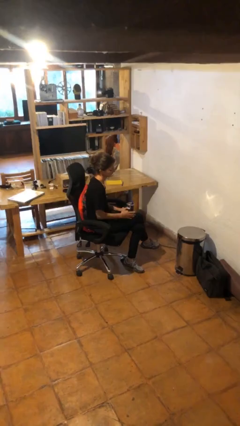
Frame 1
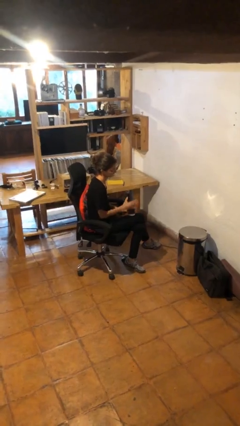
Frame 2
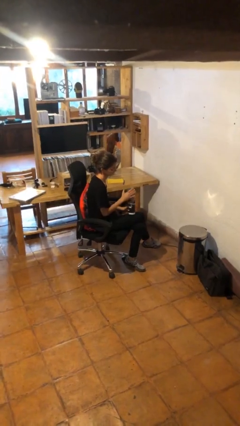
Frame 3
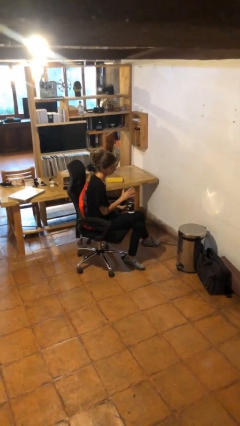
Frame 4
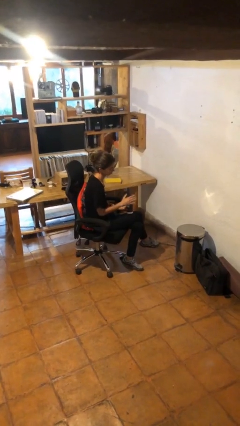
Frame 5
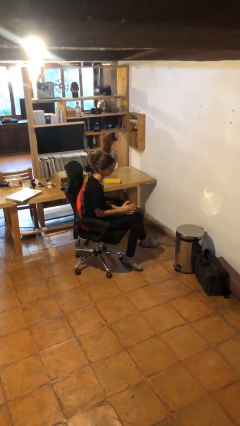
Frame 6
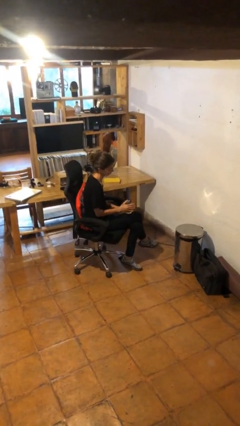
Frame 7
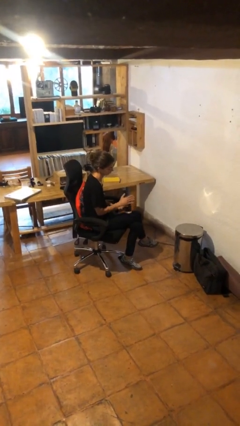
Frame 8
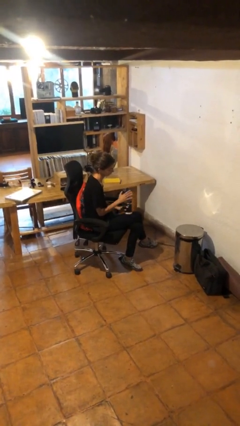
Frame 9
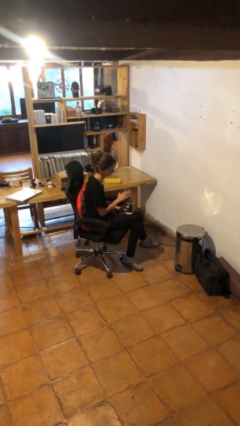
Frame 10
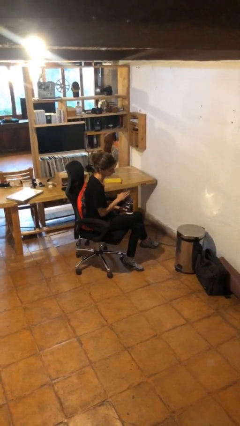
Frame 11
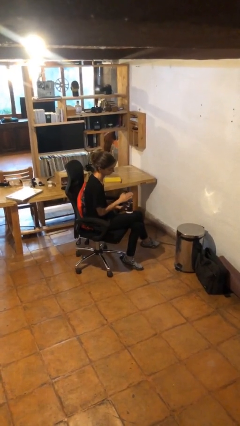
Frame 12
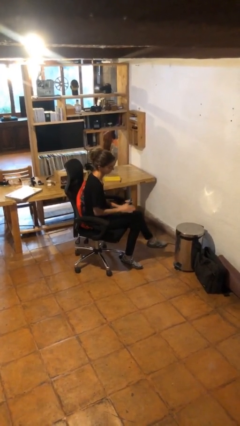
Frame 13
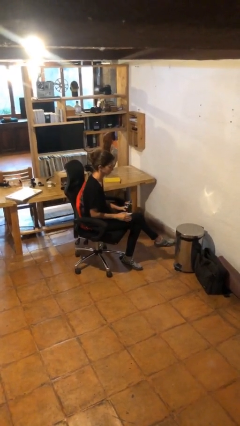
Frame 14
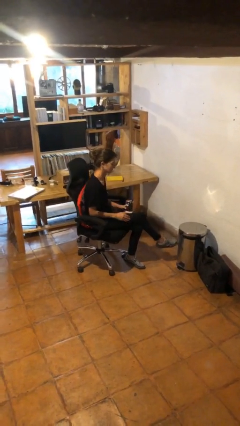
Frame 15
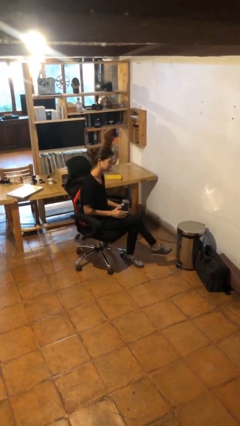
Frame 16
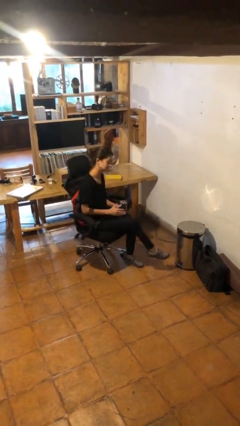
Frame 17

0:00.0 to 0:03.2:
person waves hand over object

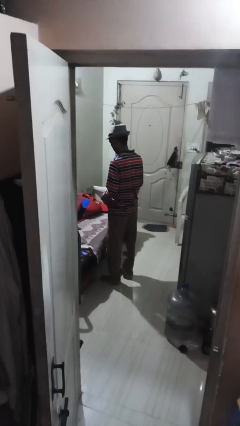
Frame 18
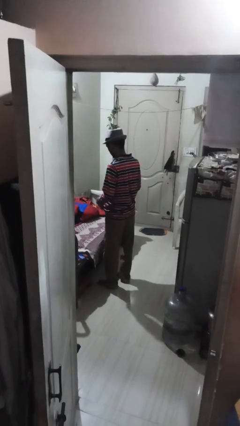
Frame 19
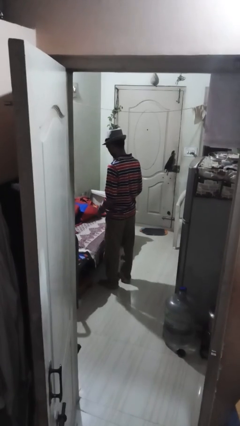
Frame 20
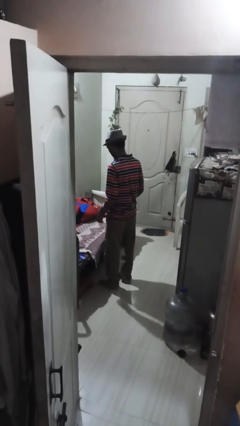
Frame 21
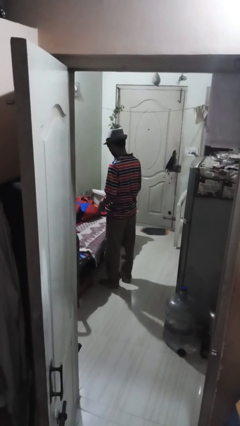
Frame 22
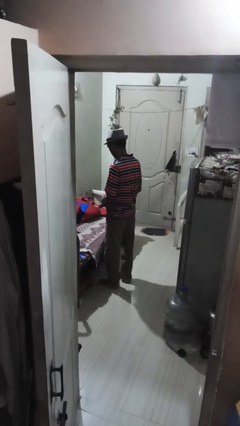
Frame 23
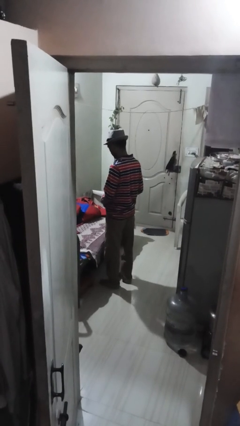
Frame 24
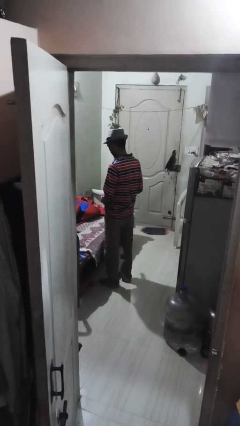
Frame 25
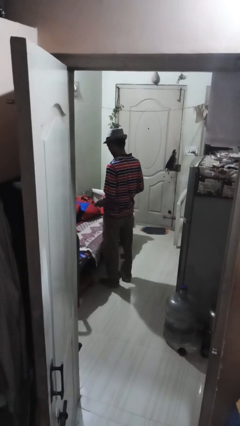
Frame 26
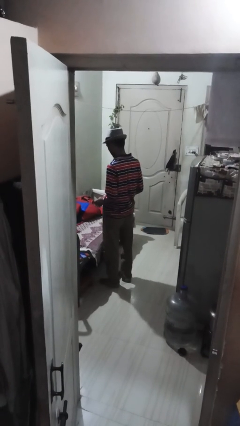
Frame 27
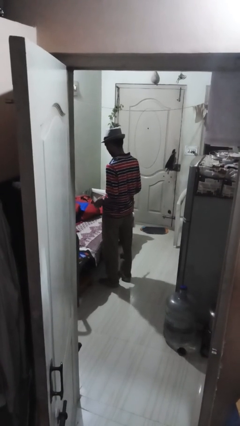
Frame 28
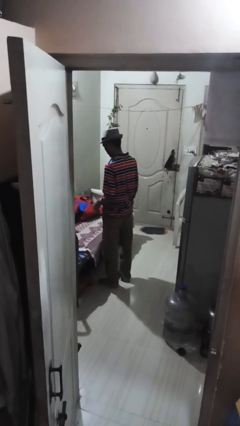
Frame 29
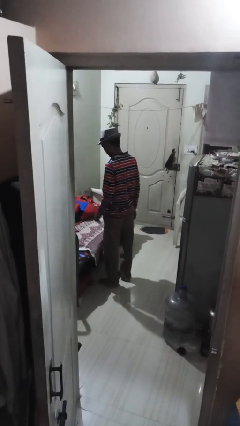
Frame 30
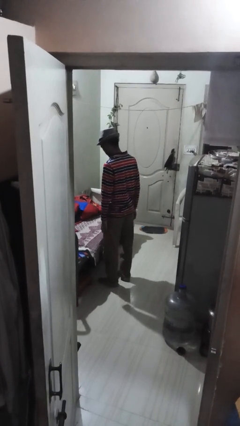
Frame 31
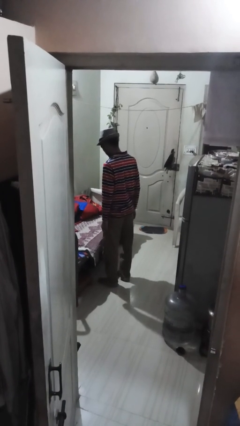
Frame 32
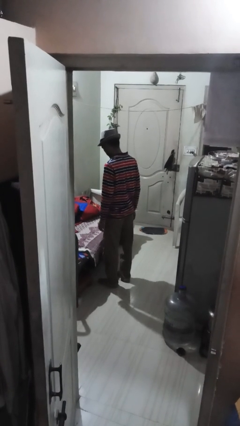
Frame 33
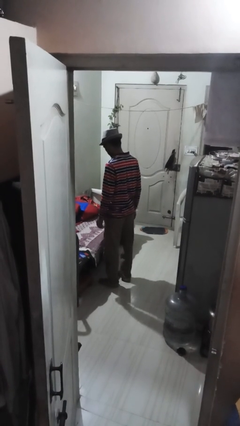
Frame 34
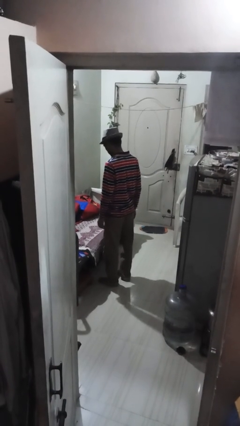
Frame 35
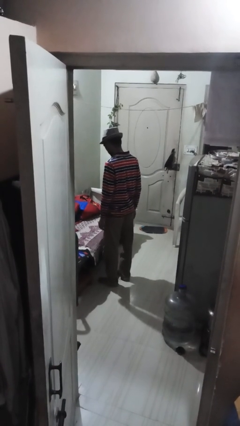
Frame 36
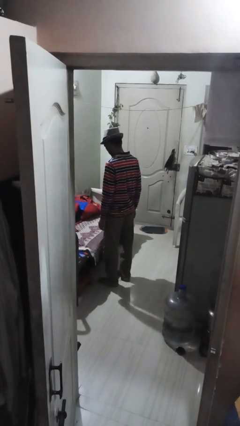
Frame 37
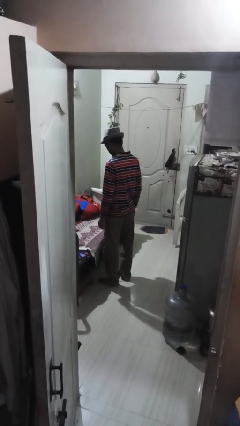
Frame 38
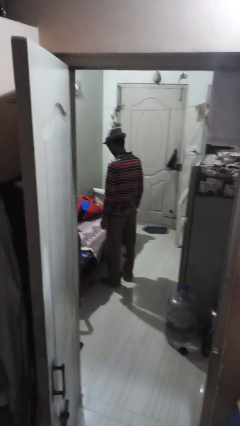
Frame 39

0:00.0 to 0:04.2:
person takes off belt

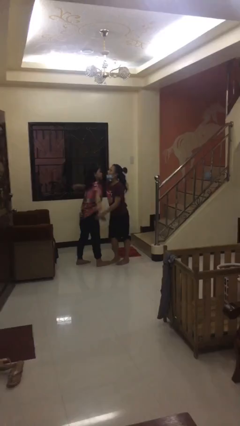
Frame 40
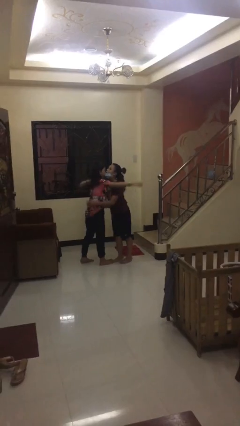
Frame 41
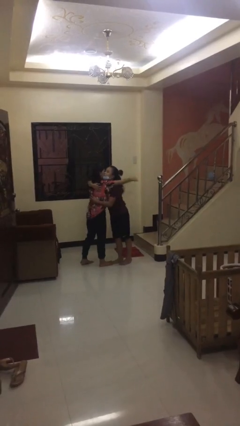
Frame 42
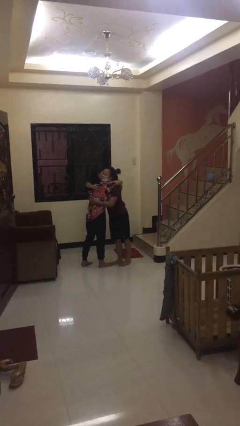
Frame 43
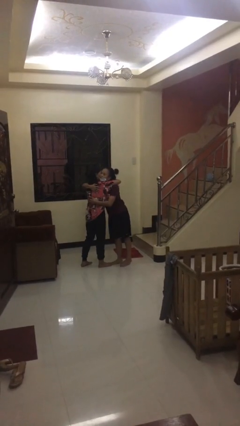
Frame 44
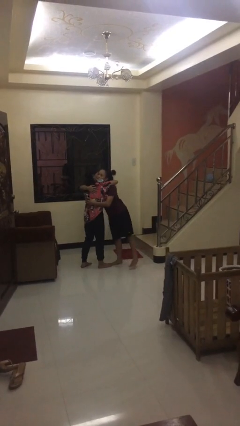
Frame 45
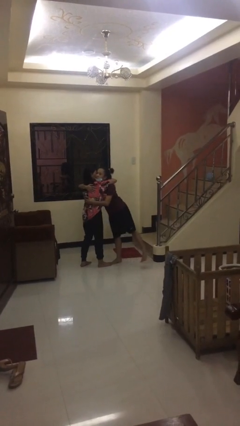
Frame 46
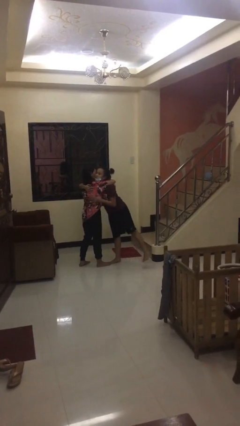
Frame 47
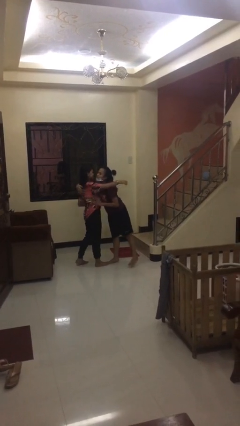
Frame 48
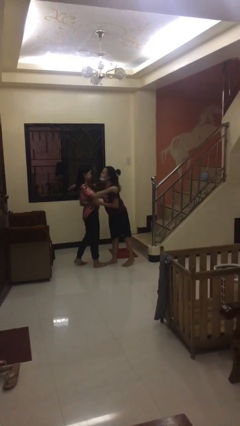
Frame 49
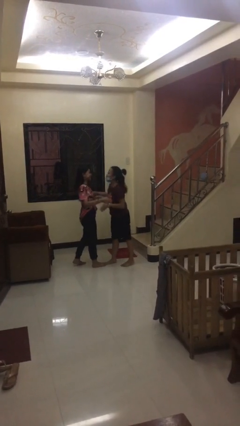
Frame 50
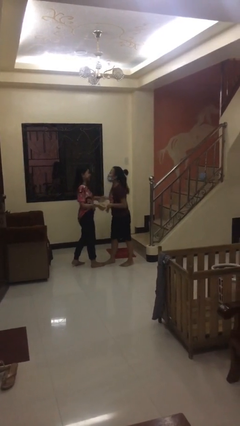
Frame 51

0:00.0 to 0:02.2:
person embraces person

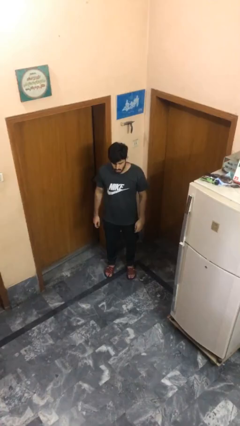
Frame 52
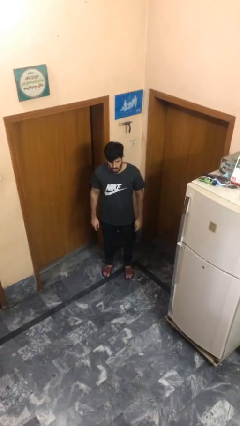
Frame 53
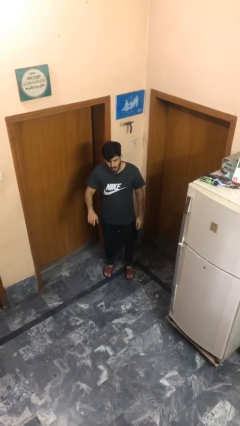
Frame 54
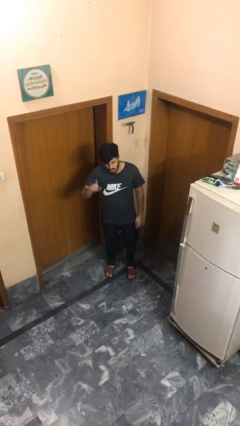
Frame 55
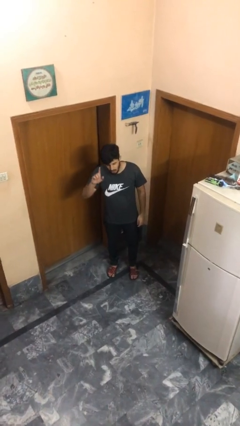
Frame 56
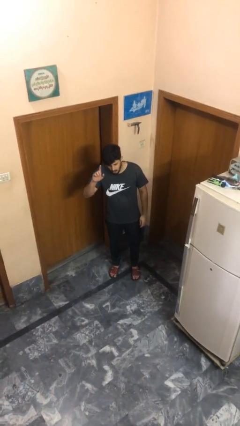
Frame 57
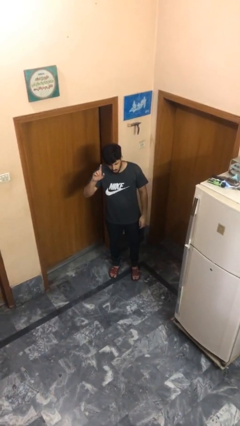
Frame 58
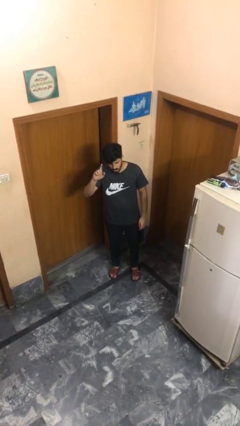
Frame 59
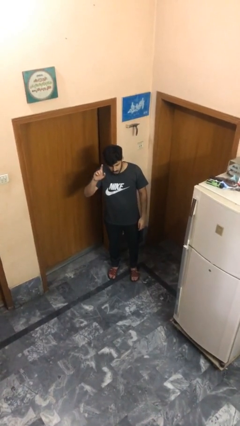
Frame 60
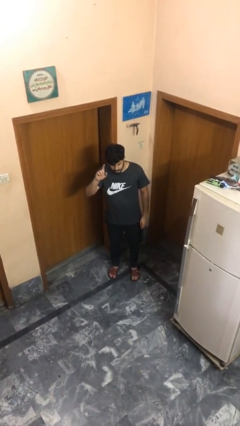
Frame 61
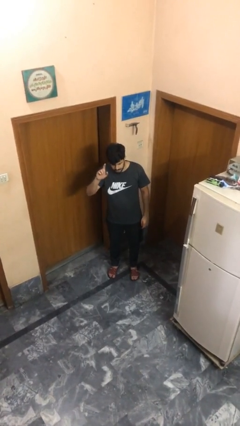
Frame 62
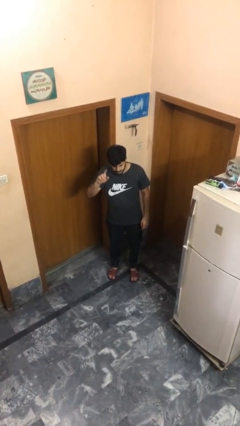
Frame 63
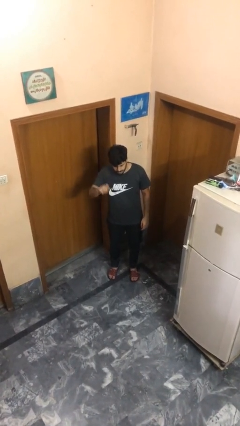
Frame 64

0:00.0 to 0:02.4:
person gestures raise hand

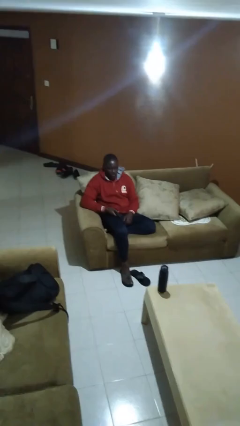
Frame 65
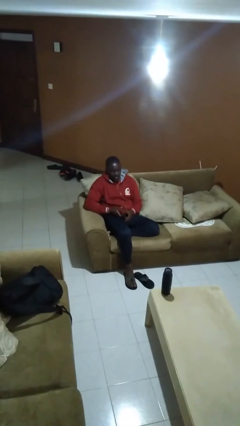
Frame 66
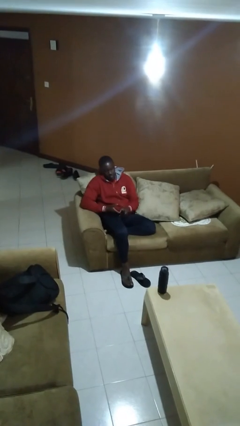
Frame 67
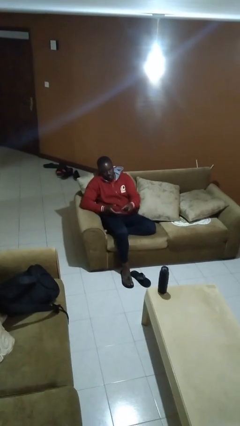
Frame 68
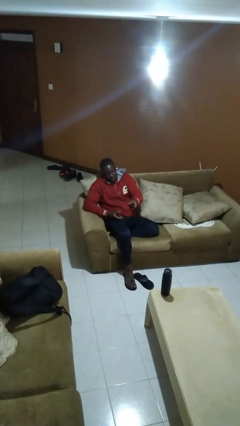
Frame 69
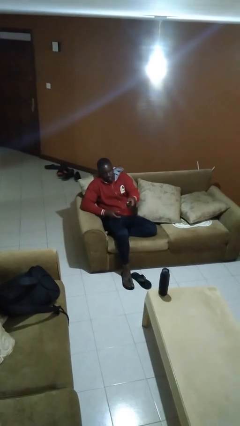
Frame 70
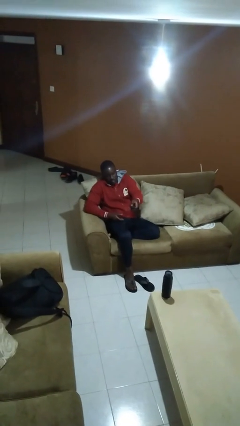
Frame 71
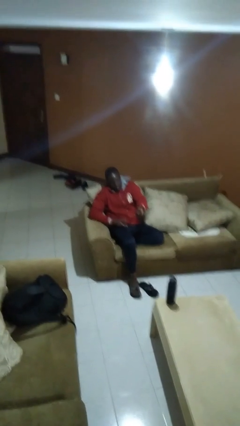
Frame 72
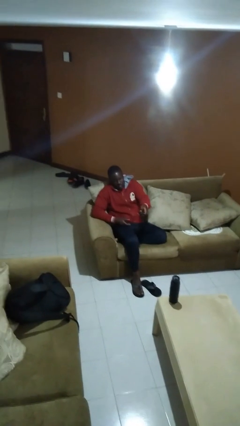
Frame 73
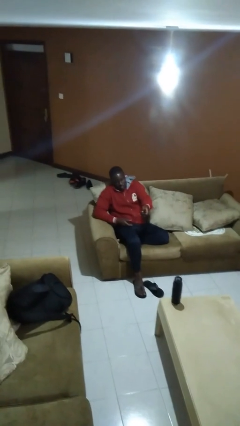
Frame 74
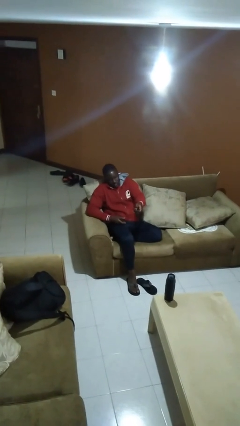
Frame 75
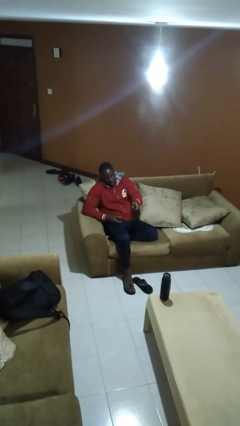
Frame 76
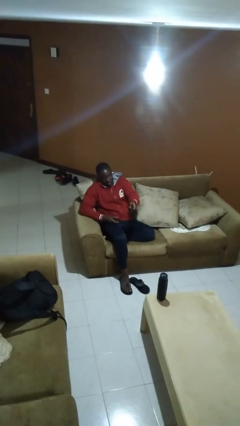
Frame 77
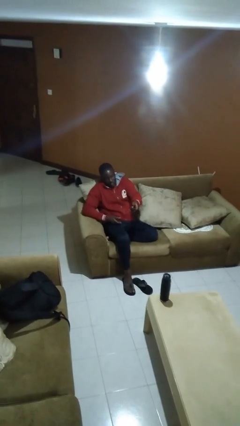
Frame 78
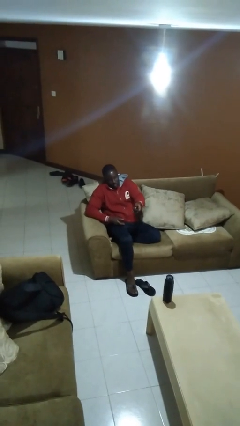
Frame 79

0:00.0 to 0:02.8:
person uses television remote

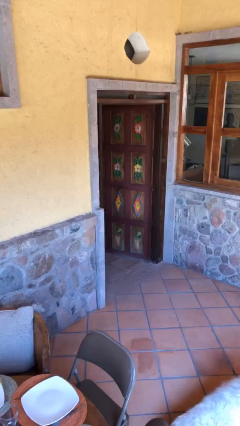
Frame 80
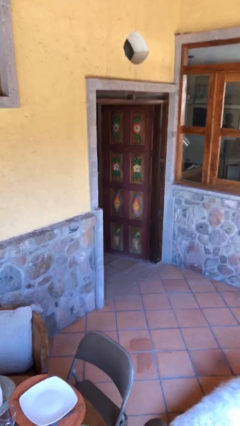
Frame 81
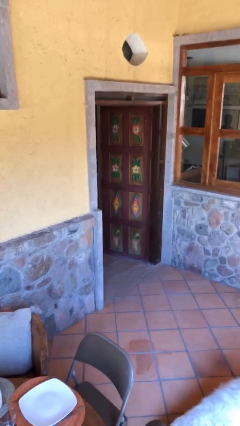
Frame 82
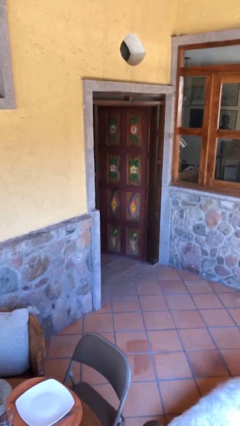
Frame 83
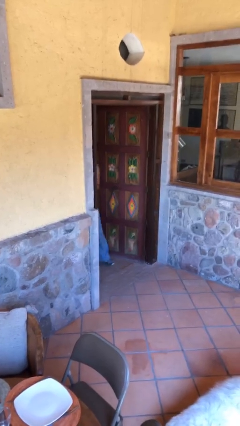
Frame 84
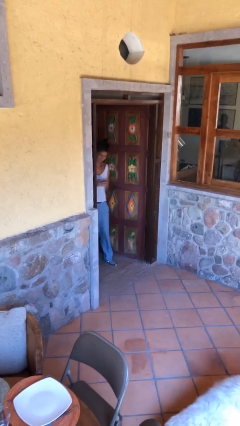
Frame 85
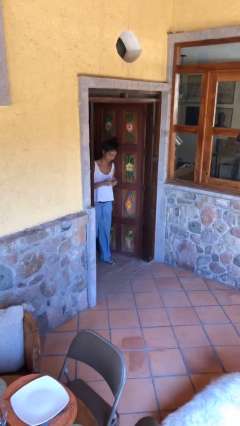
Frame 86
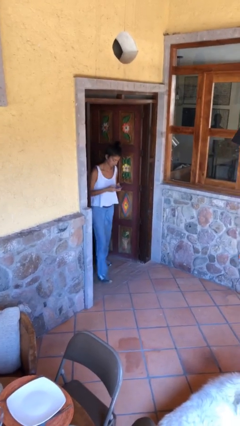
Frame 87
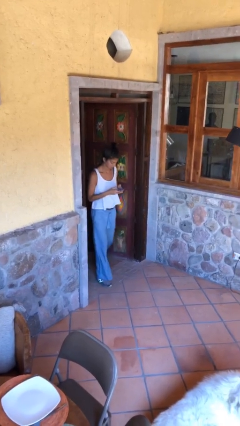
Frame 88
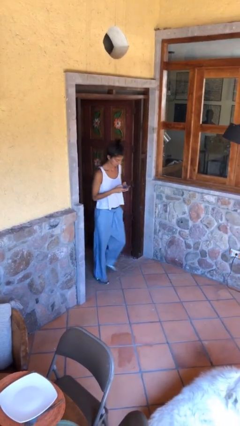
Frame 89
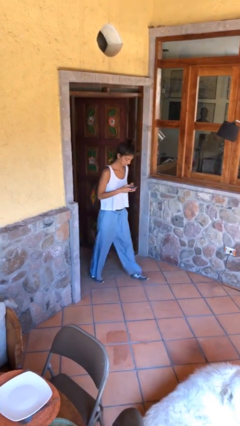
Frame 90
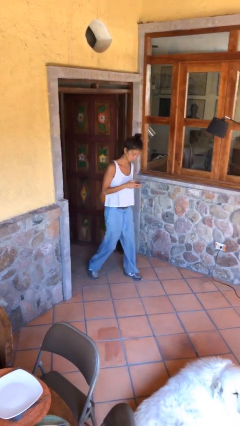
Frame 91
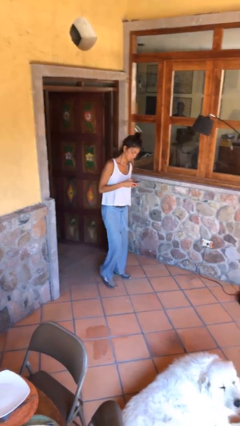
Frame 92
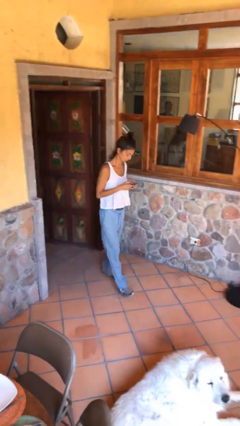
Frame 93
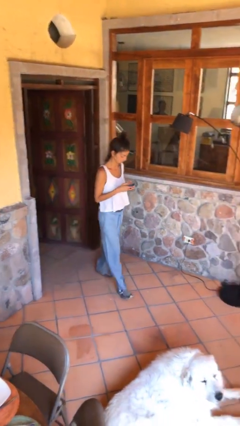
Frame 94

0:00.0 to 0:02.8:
person enters scene through structure
